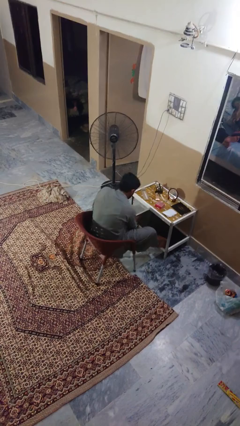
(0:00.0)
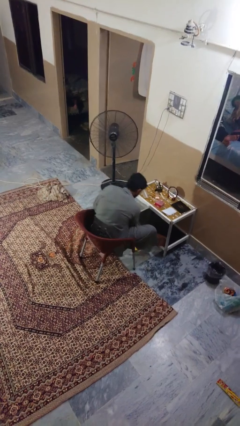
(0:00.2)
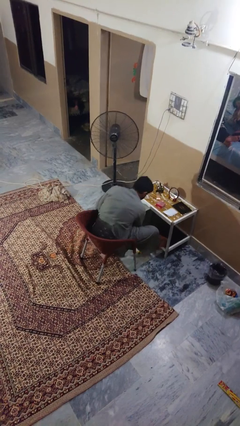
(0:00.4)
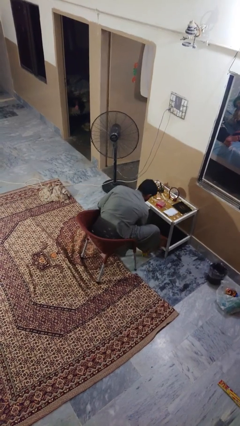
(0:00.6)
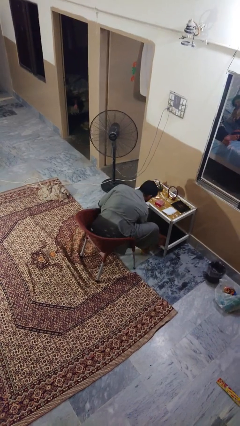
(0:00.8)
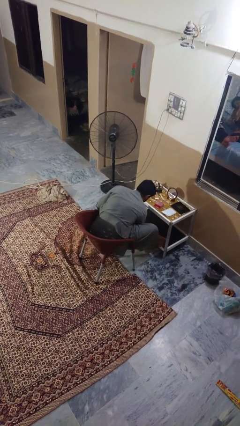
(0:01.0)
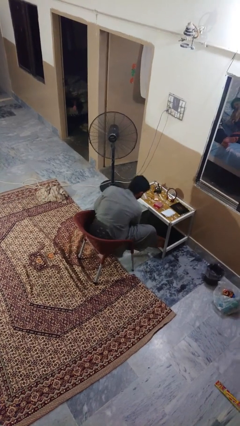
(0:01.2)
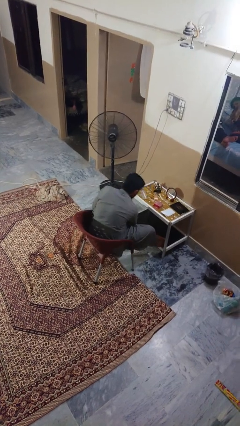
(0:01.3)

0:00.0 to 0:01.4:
person picks up object from floor

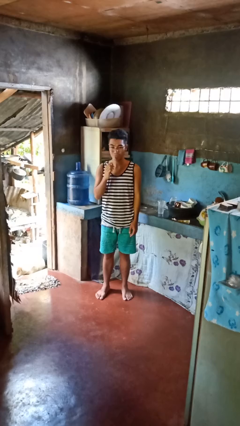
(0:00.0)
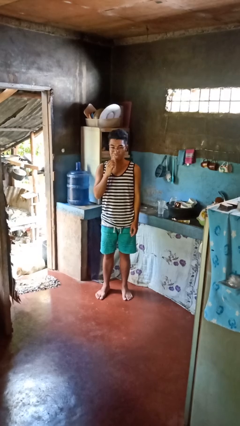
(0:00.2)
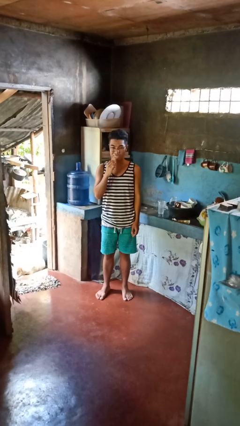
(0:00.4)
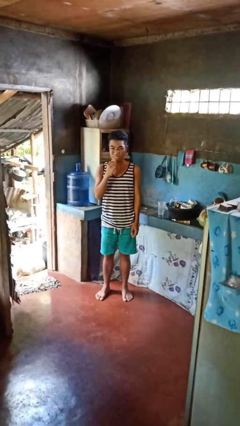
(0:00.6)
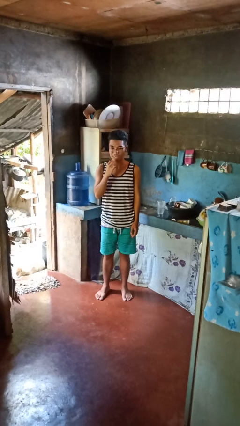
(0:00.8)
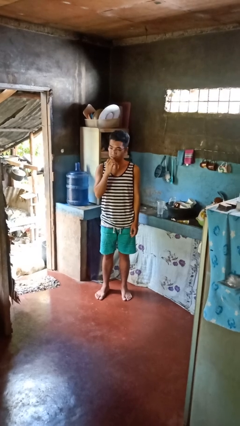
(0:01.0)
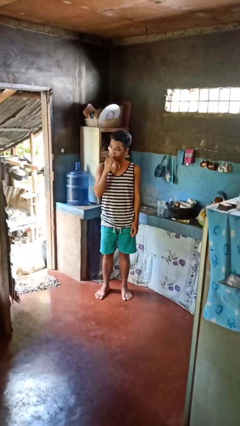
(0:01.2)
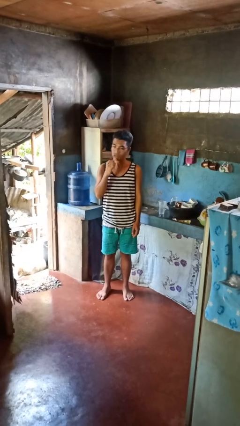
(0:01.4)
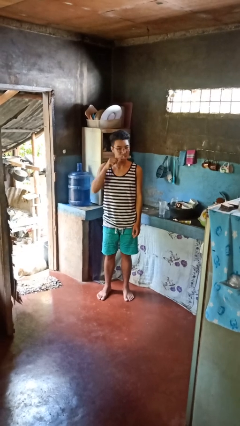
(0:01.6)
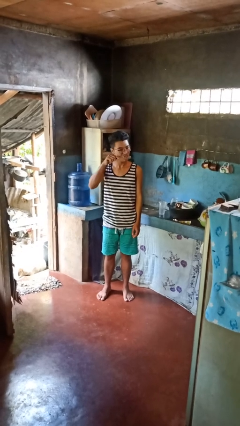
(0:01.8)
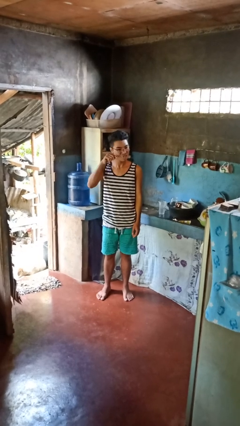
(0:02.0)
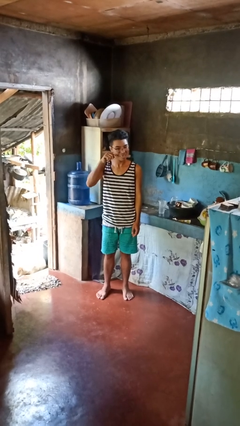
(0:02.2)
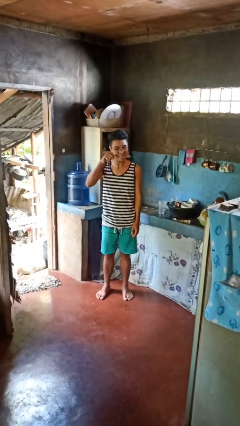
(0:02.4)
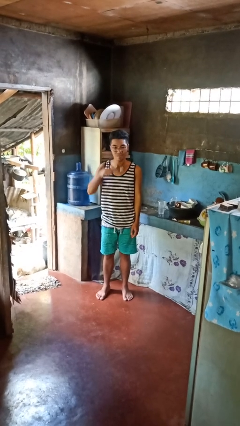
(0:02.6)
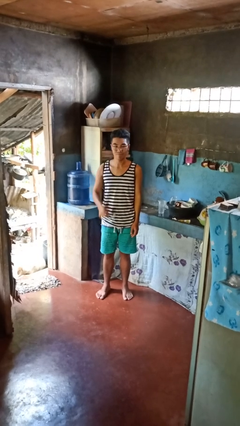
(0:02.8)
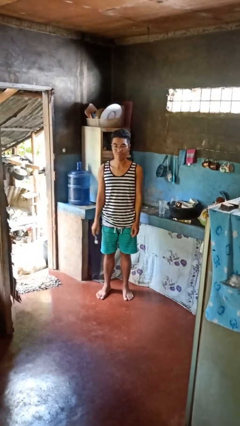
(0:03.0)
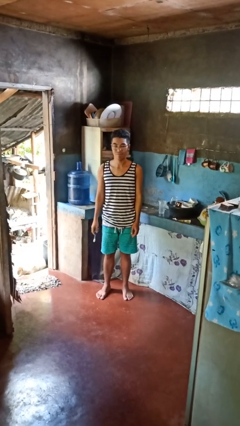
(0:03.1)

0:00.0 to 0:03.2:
person brushes teeth

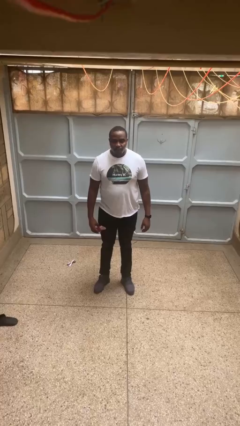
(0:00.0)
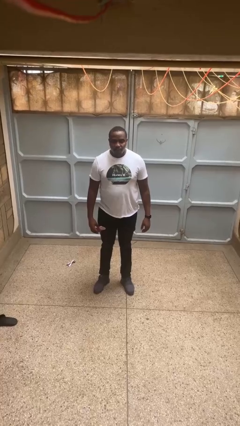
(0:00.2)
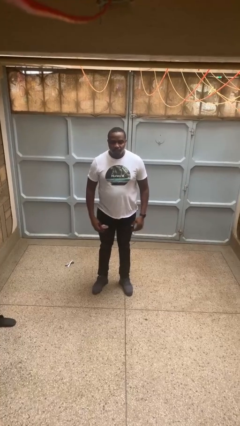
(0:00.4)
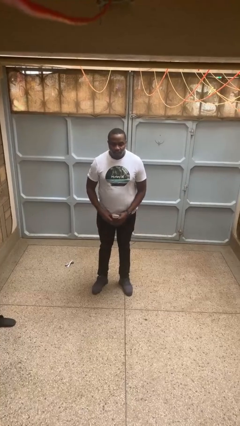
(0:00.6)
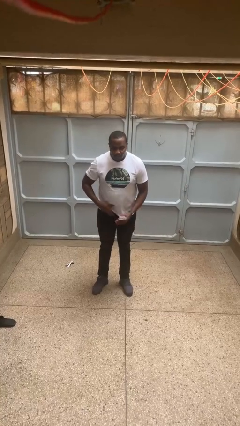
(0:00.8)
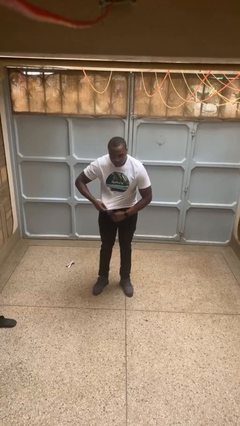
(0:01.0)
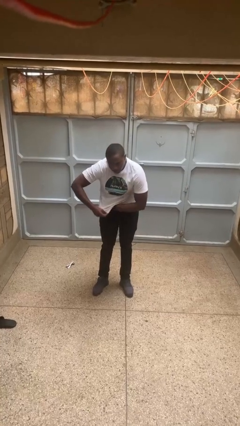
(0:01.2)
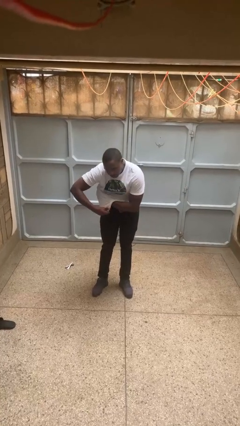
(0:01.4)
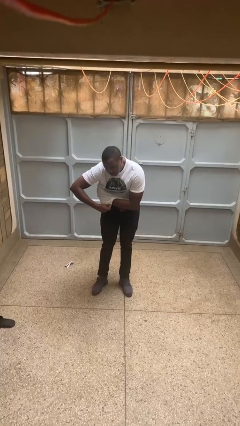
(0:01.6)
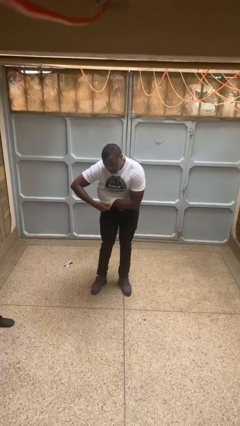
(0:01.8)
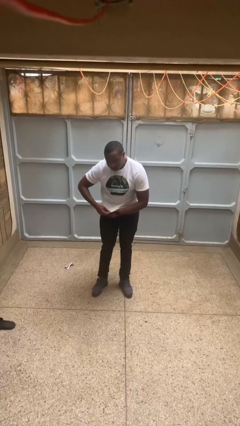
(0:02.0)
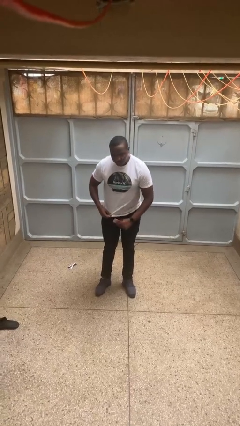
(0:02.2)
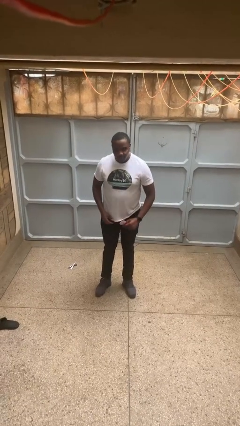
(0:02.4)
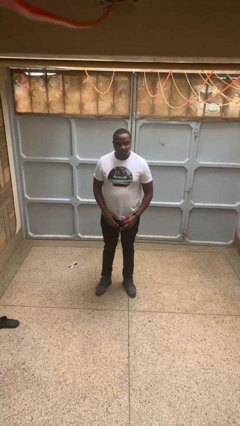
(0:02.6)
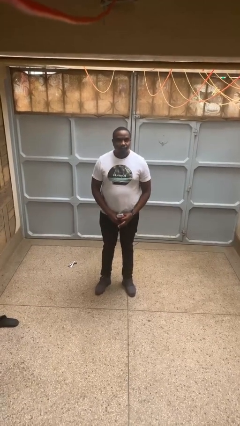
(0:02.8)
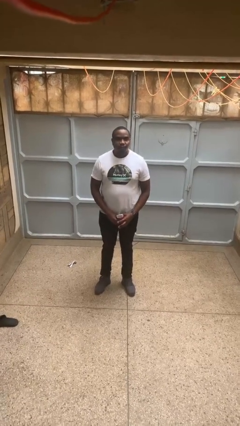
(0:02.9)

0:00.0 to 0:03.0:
person applies deodorant

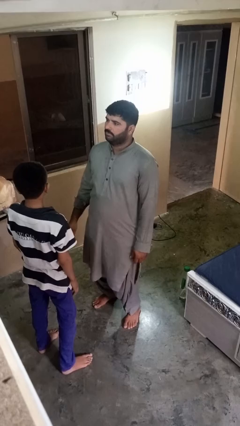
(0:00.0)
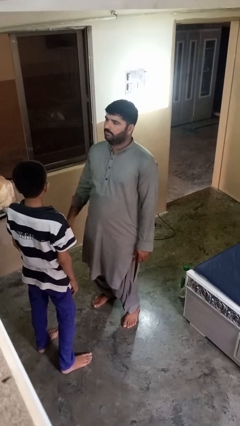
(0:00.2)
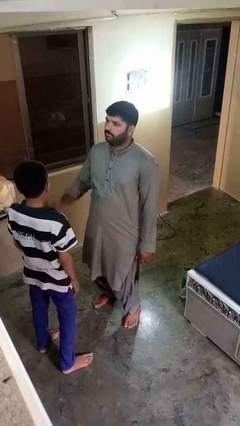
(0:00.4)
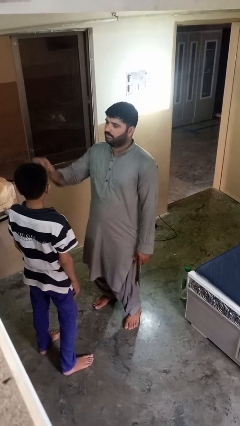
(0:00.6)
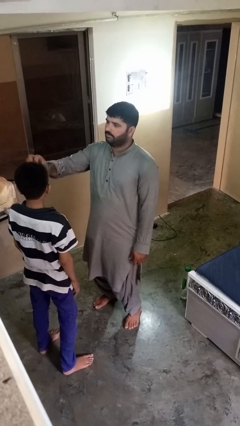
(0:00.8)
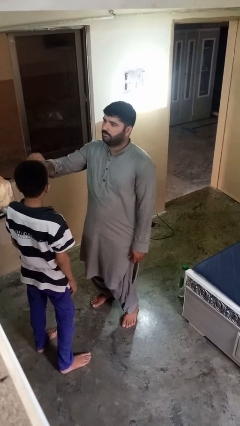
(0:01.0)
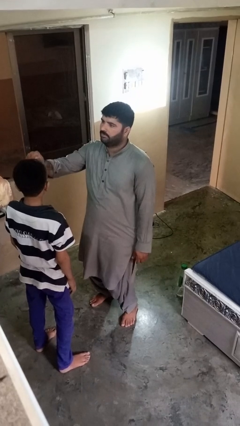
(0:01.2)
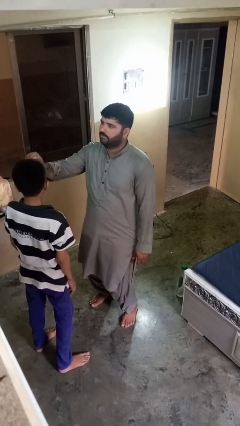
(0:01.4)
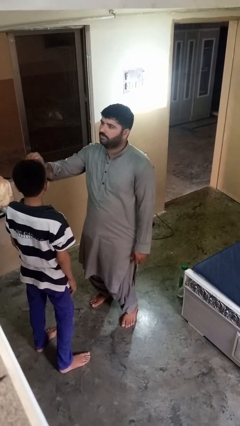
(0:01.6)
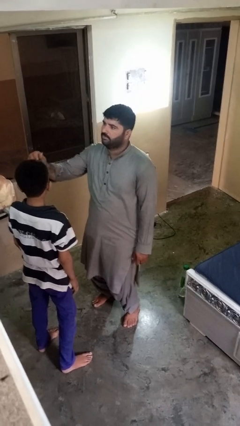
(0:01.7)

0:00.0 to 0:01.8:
person braids hair of person

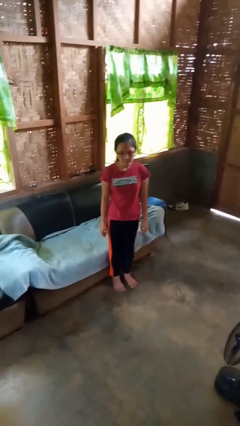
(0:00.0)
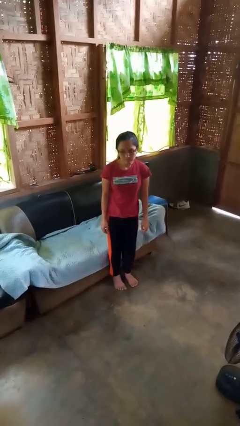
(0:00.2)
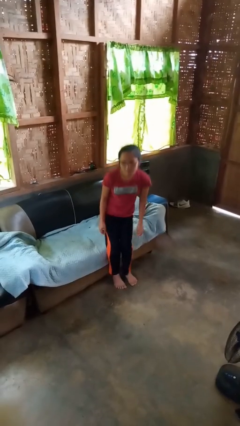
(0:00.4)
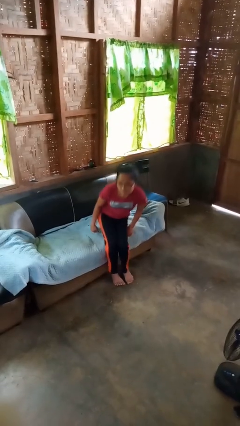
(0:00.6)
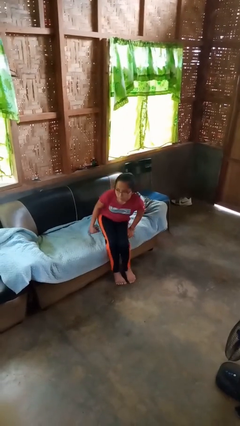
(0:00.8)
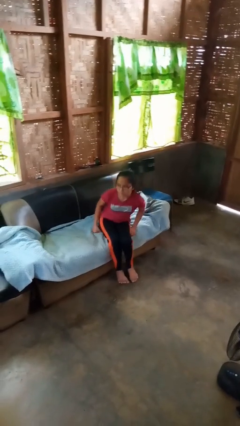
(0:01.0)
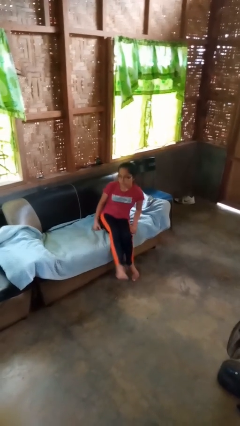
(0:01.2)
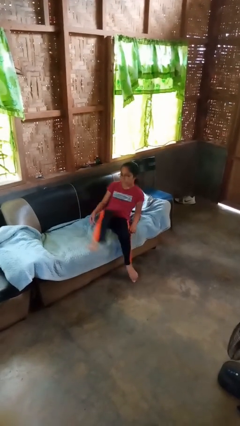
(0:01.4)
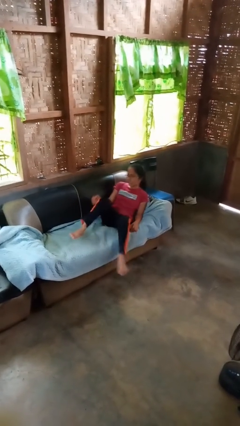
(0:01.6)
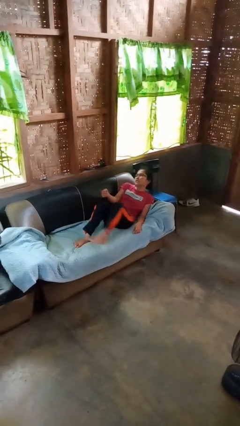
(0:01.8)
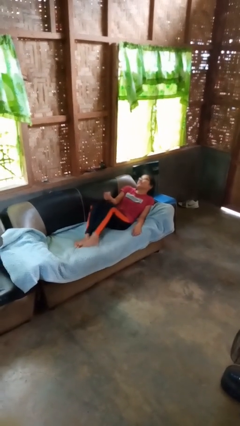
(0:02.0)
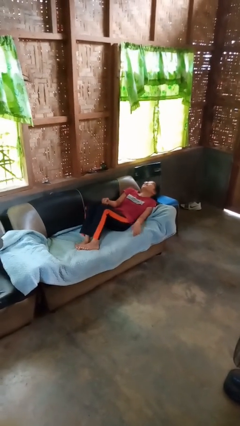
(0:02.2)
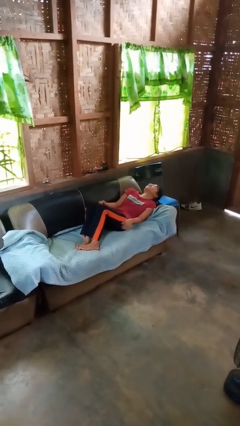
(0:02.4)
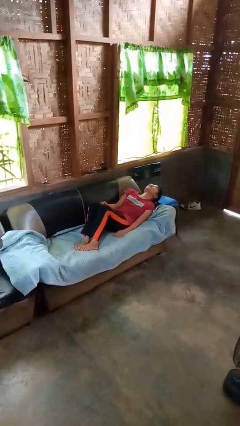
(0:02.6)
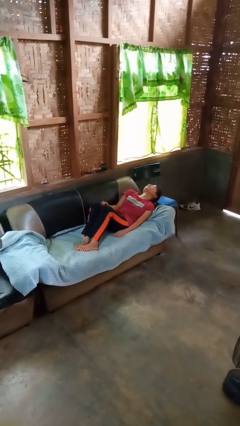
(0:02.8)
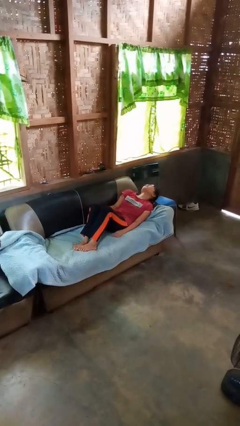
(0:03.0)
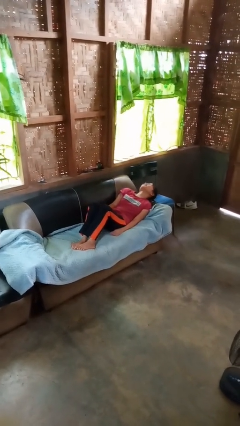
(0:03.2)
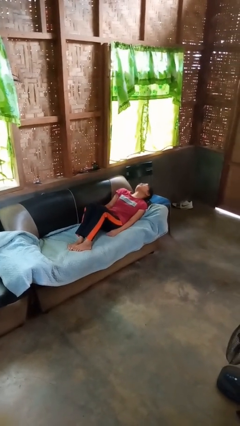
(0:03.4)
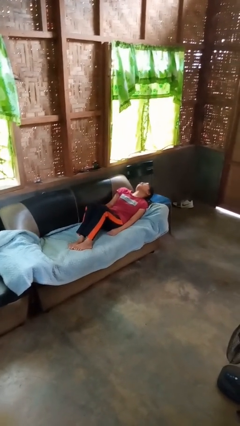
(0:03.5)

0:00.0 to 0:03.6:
person lies down on couch

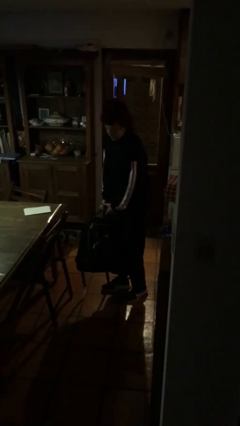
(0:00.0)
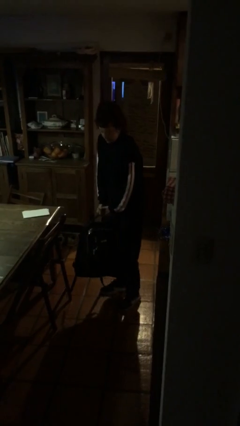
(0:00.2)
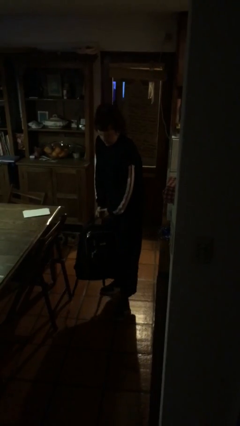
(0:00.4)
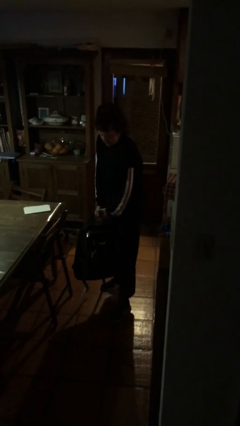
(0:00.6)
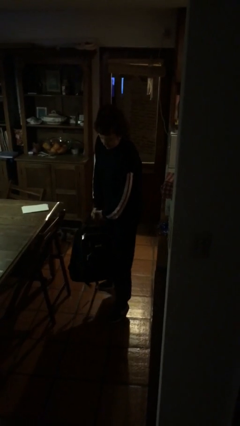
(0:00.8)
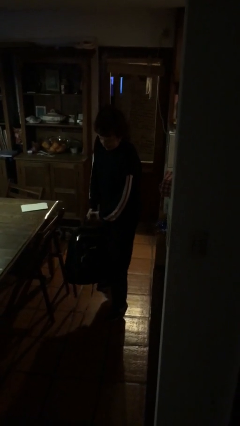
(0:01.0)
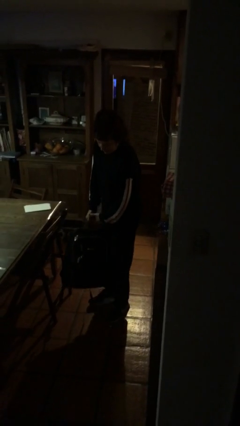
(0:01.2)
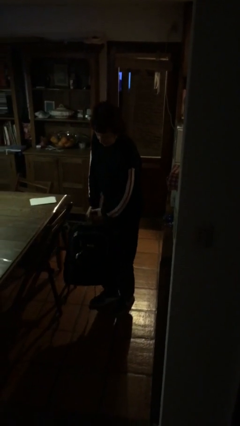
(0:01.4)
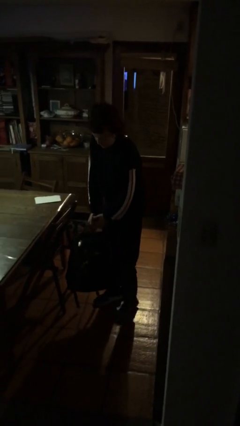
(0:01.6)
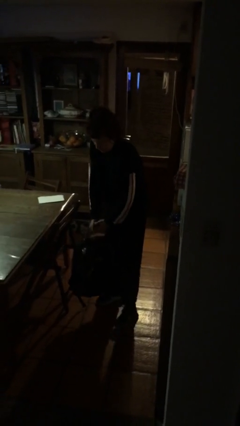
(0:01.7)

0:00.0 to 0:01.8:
person carries heavy object

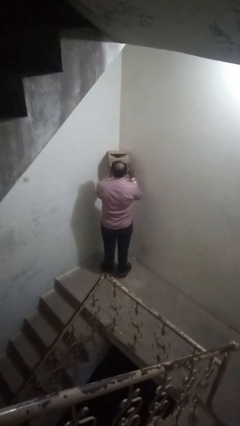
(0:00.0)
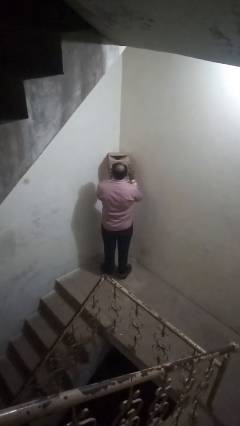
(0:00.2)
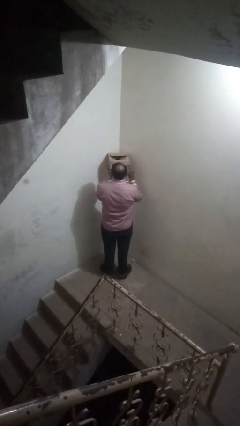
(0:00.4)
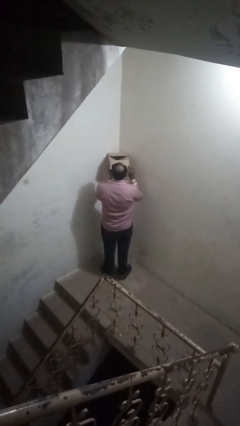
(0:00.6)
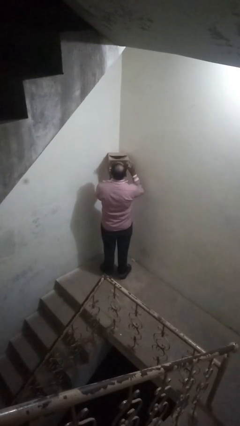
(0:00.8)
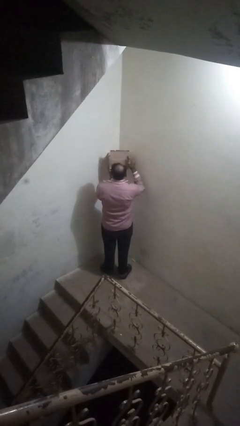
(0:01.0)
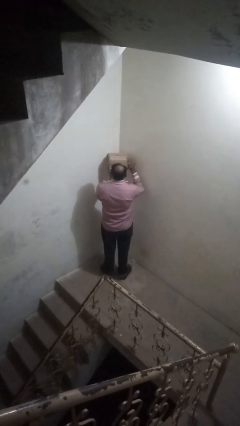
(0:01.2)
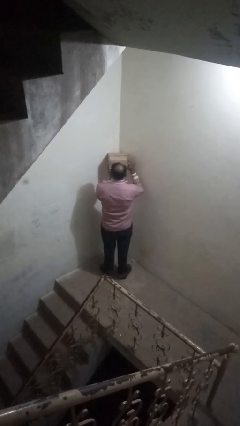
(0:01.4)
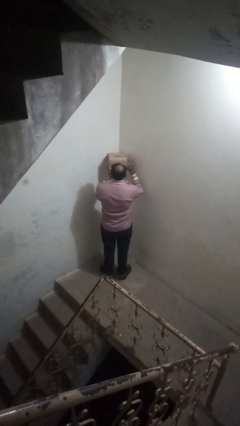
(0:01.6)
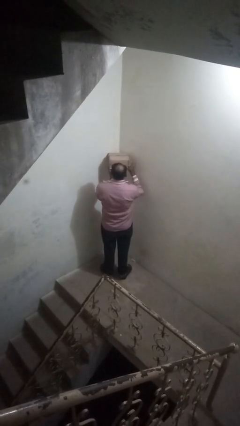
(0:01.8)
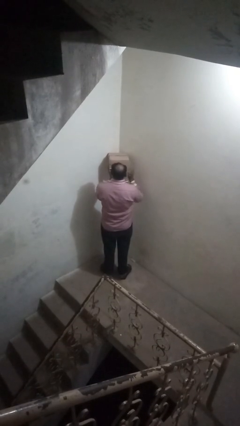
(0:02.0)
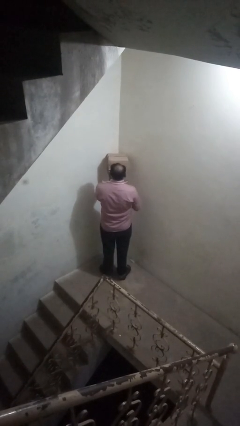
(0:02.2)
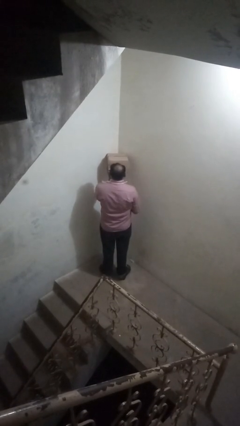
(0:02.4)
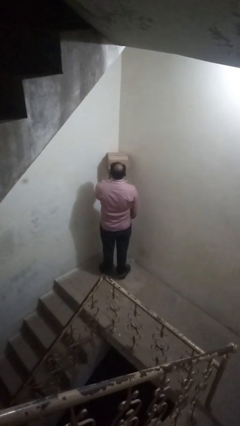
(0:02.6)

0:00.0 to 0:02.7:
person closes mailbox
